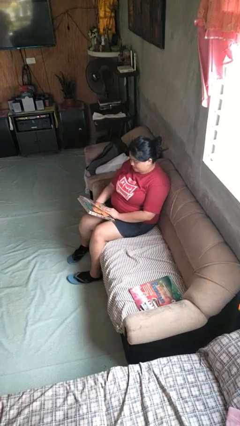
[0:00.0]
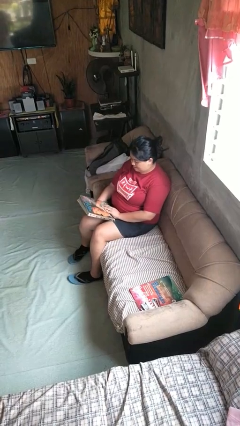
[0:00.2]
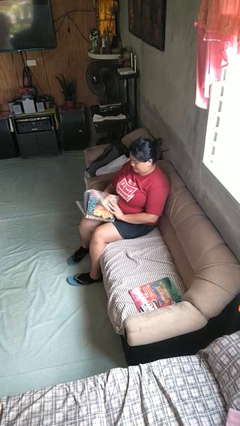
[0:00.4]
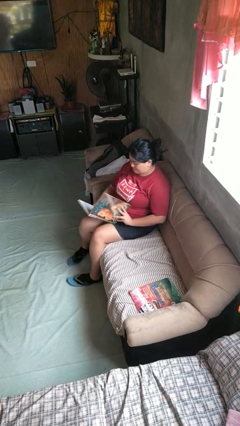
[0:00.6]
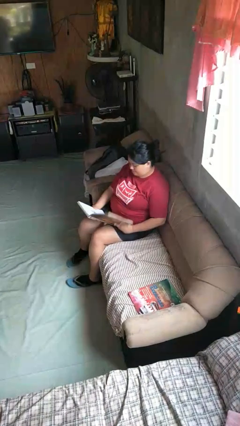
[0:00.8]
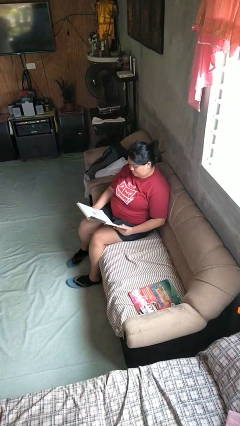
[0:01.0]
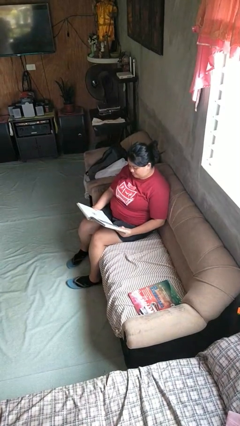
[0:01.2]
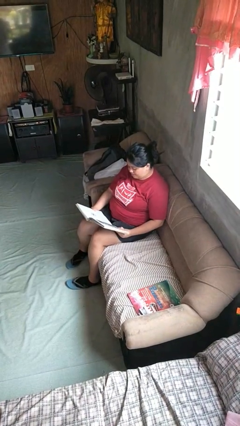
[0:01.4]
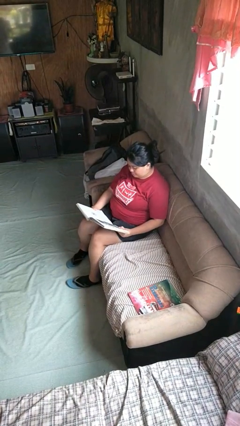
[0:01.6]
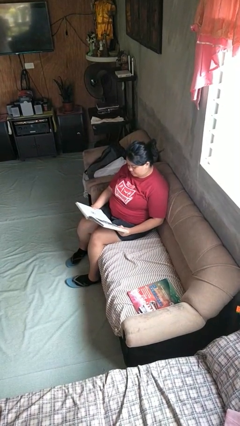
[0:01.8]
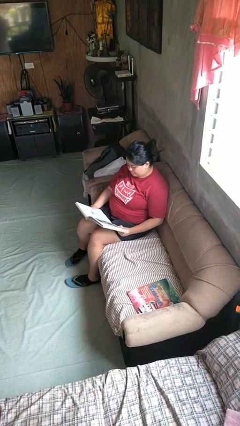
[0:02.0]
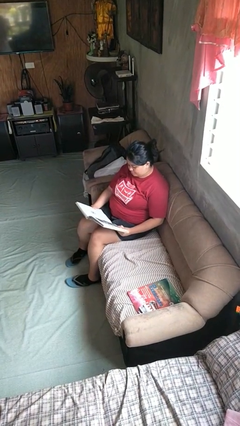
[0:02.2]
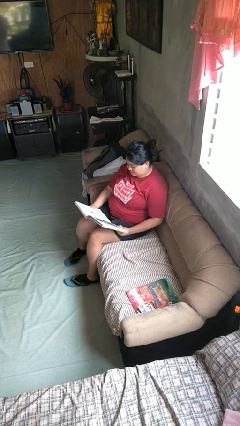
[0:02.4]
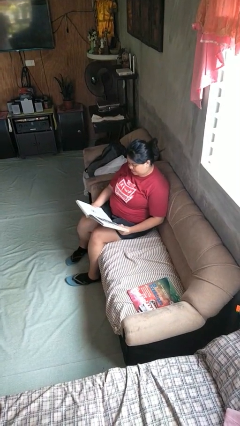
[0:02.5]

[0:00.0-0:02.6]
person reads book

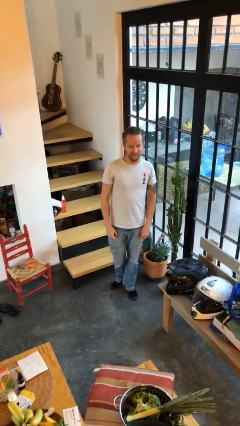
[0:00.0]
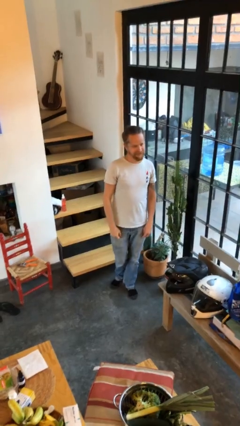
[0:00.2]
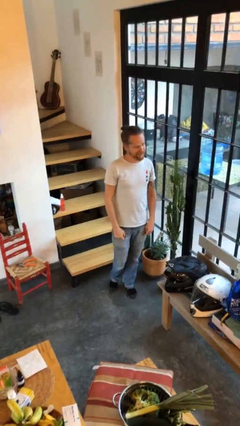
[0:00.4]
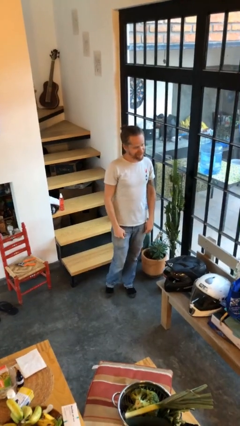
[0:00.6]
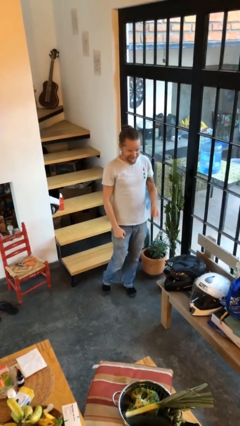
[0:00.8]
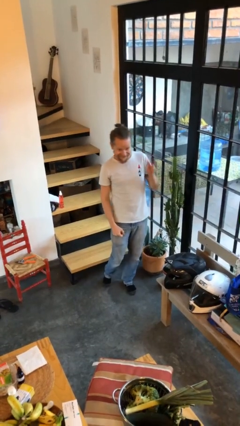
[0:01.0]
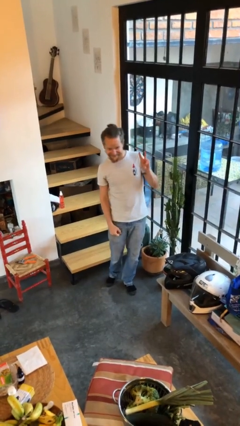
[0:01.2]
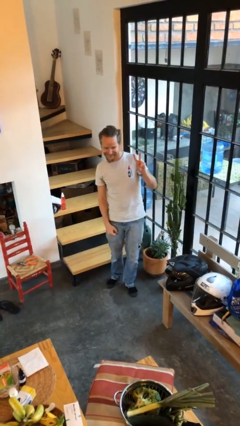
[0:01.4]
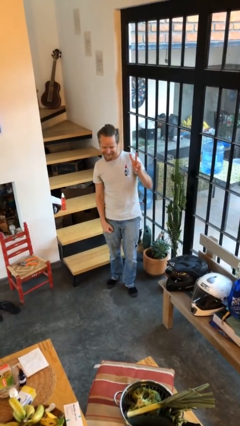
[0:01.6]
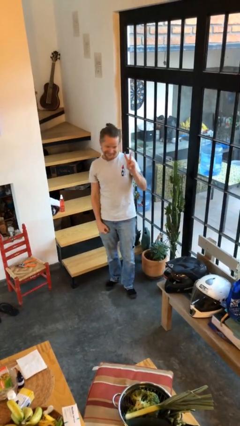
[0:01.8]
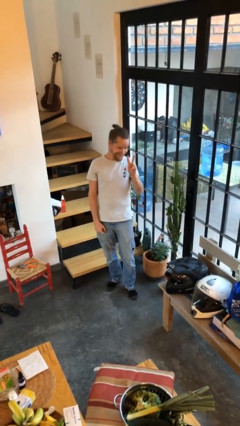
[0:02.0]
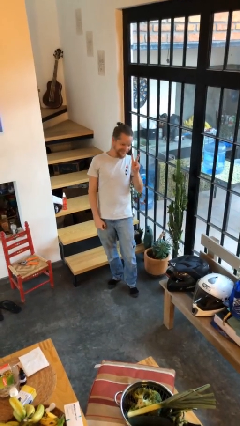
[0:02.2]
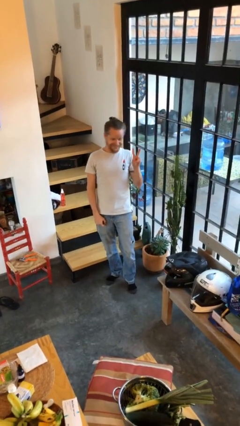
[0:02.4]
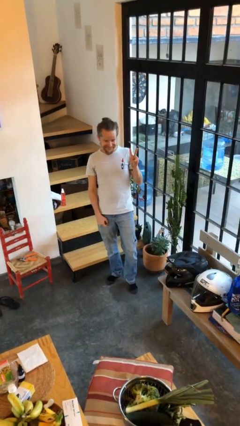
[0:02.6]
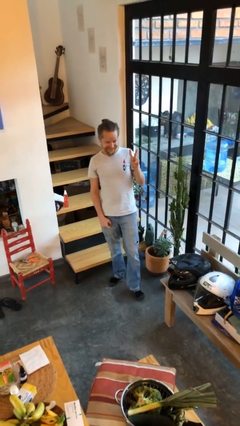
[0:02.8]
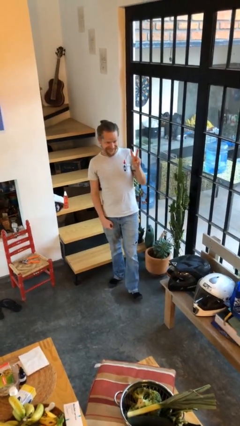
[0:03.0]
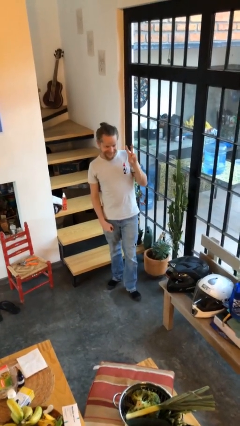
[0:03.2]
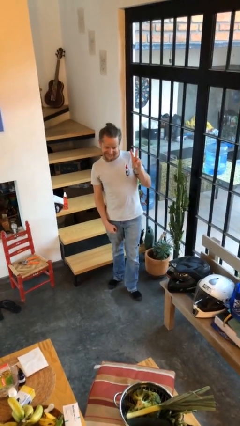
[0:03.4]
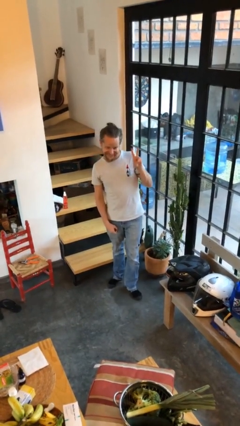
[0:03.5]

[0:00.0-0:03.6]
person gestures peace

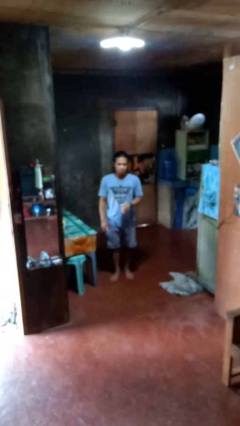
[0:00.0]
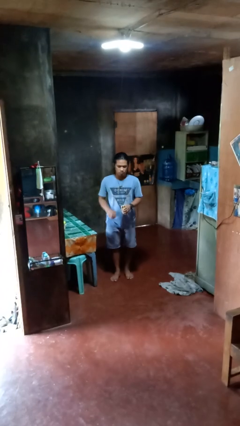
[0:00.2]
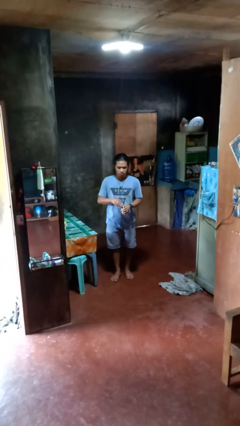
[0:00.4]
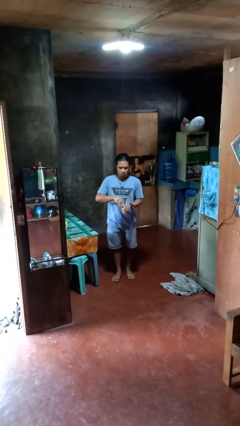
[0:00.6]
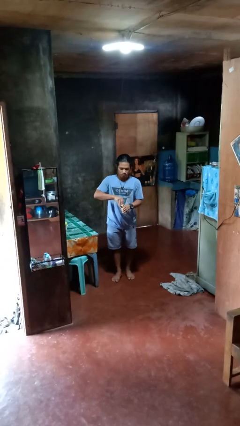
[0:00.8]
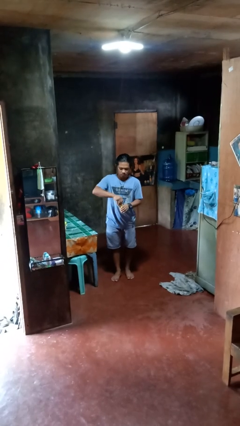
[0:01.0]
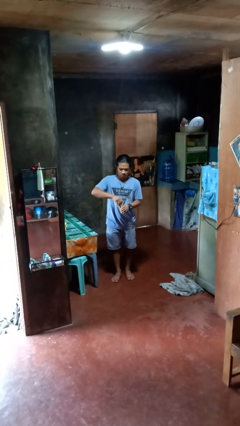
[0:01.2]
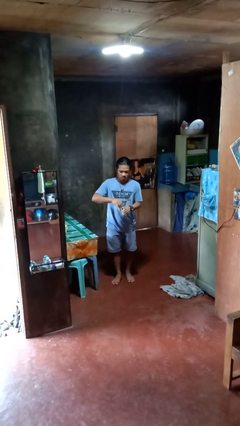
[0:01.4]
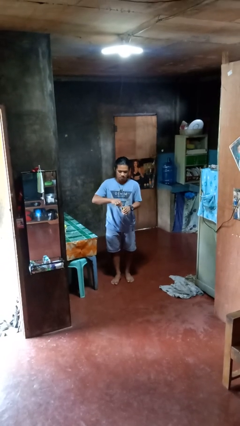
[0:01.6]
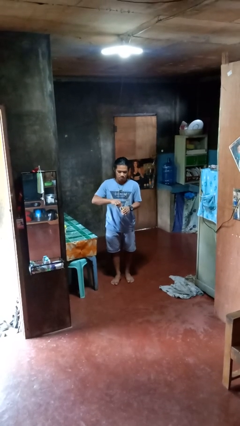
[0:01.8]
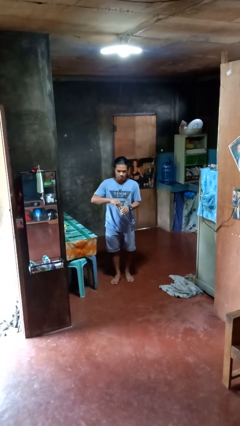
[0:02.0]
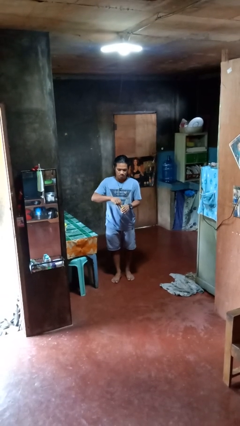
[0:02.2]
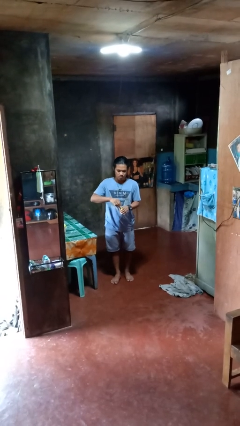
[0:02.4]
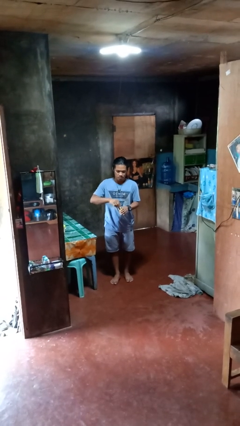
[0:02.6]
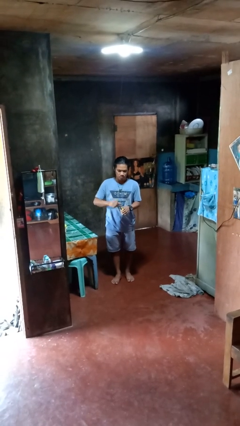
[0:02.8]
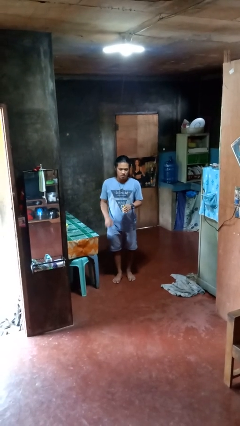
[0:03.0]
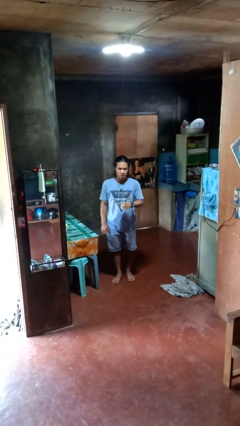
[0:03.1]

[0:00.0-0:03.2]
person opens beverage can

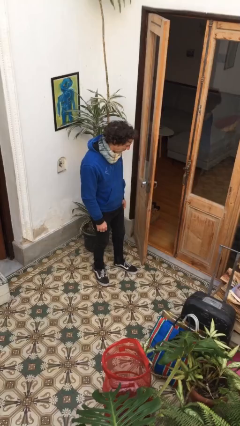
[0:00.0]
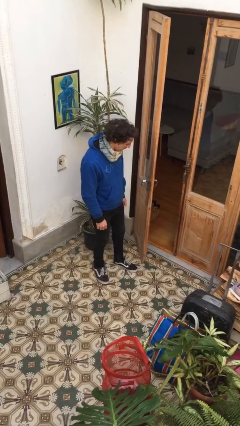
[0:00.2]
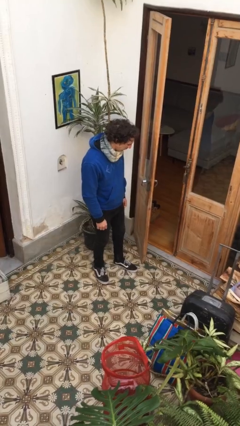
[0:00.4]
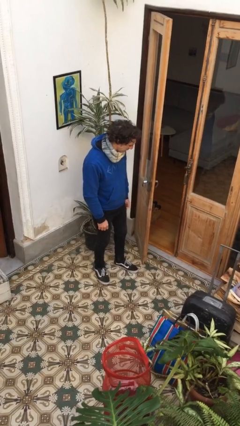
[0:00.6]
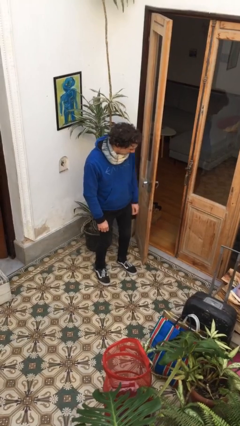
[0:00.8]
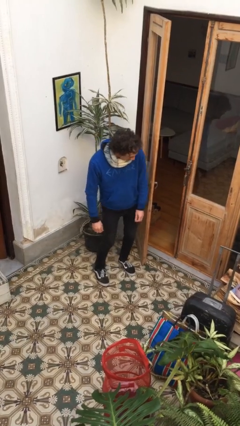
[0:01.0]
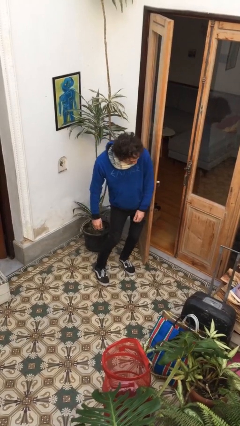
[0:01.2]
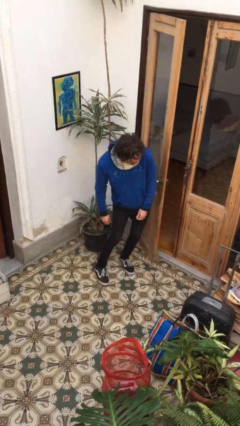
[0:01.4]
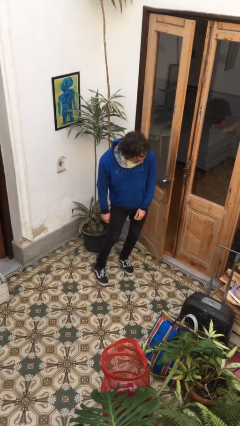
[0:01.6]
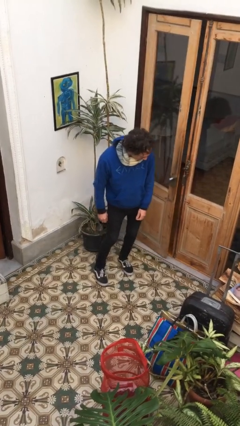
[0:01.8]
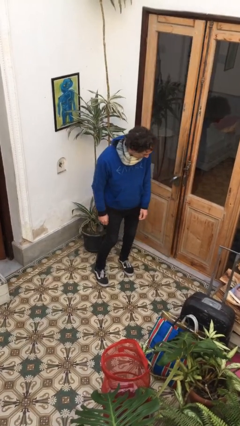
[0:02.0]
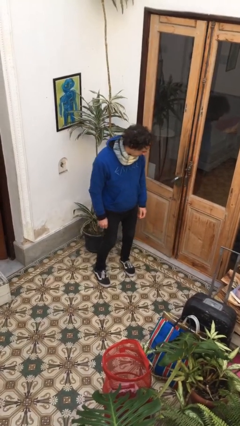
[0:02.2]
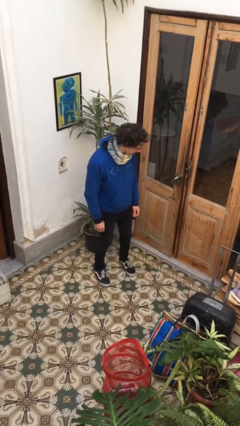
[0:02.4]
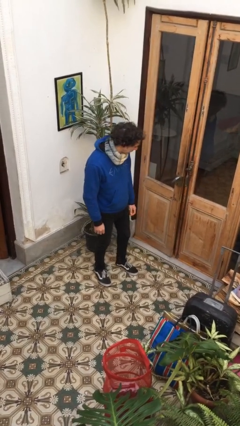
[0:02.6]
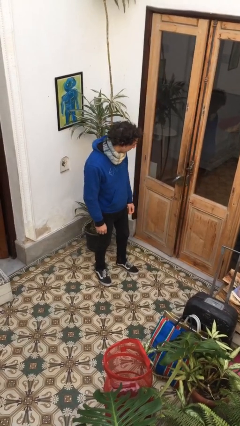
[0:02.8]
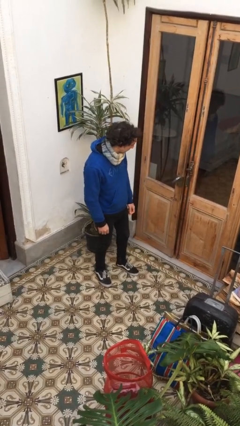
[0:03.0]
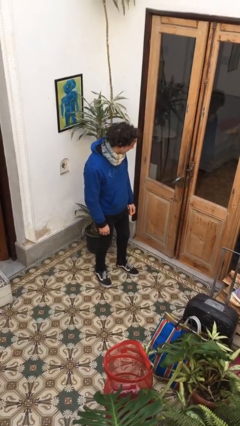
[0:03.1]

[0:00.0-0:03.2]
person closes door with hip

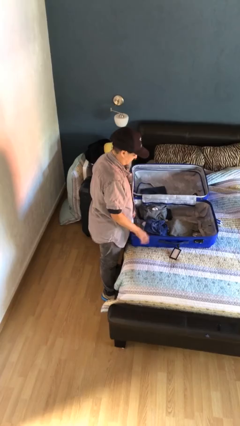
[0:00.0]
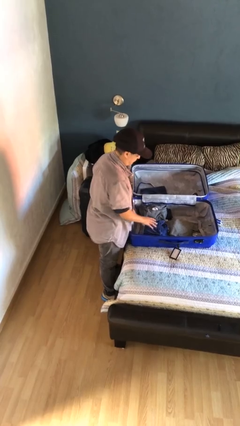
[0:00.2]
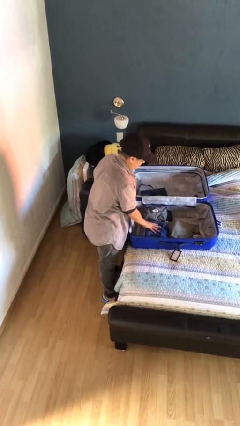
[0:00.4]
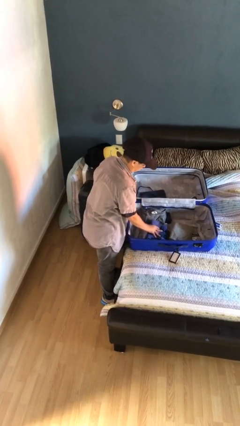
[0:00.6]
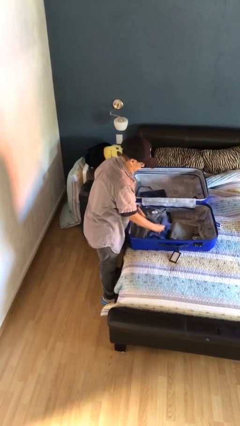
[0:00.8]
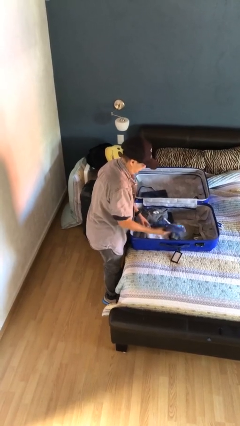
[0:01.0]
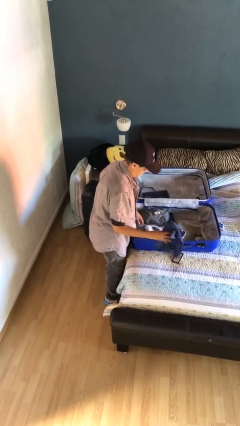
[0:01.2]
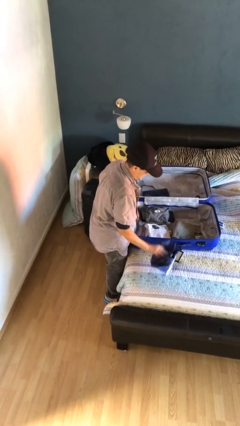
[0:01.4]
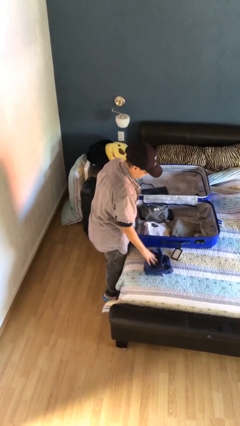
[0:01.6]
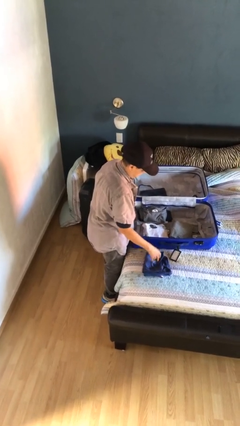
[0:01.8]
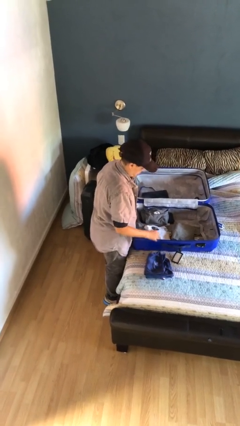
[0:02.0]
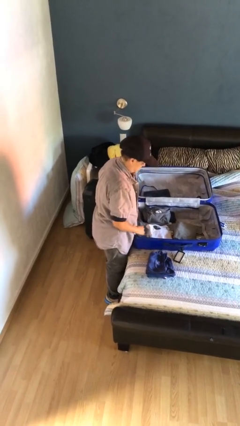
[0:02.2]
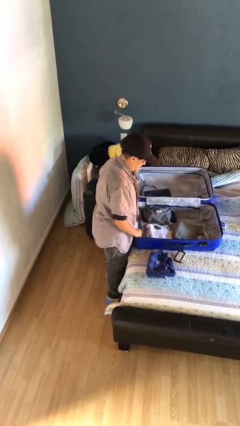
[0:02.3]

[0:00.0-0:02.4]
person unloads clothes from suitcase

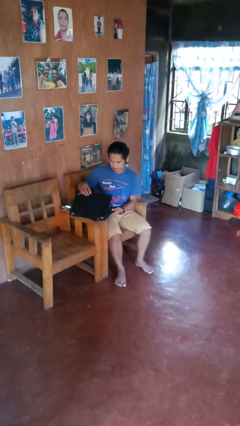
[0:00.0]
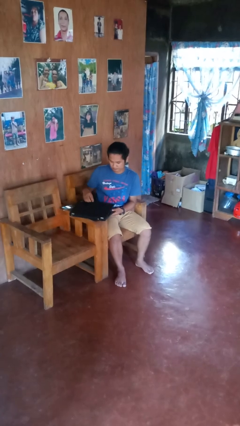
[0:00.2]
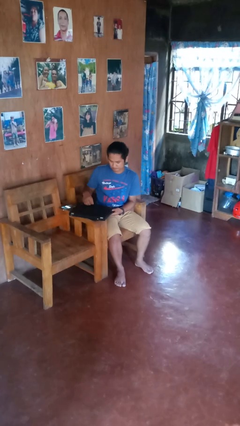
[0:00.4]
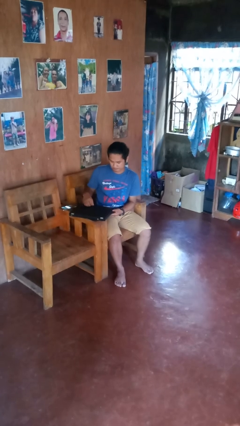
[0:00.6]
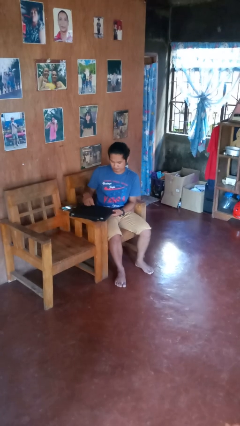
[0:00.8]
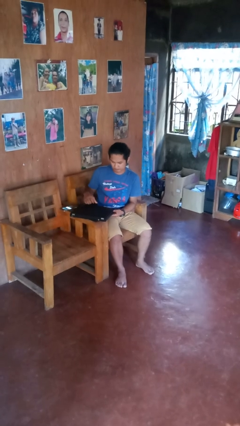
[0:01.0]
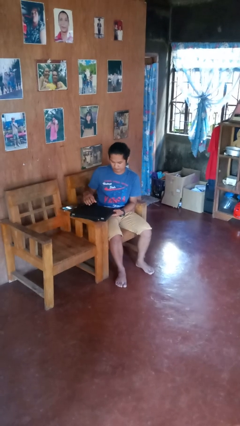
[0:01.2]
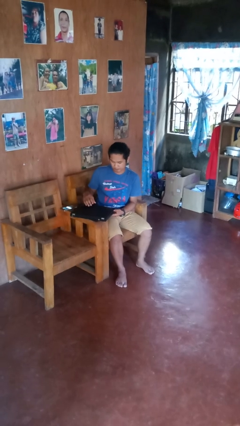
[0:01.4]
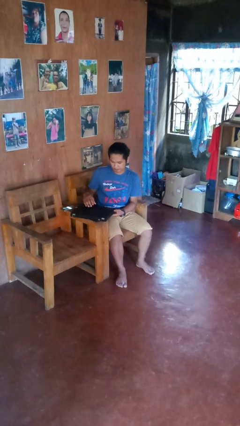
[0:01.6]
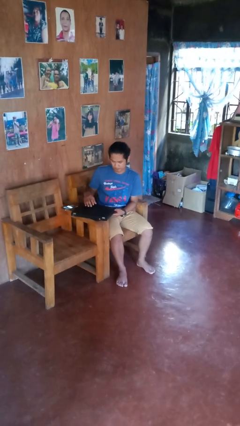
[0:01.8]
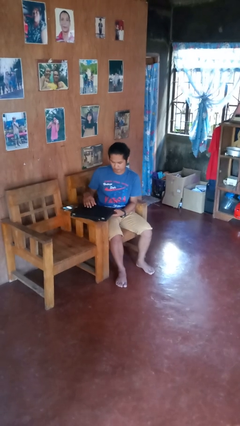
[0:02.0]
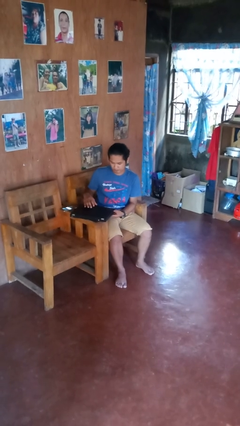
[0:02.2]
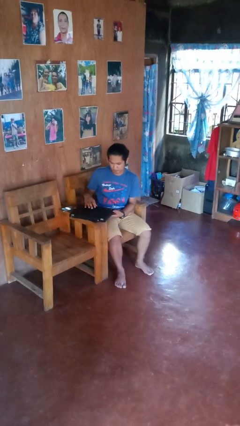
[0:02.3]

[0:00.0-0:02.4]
person closes laptop
